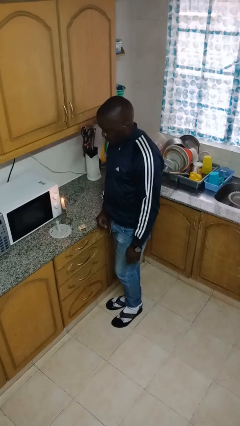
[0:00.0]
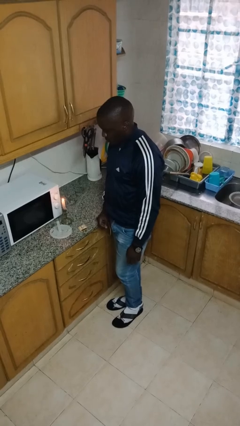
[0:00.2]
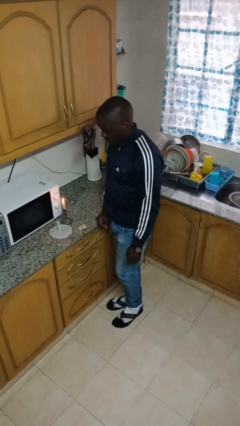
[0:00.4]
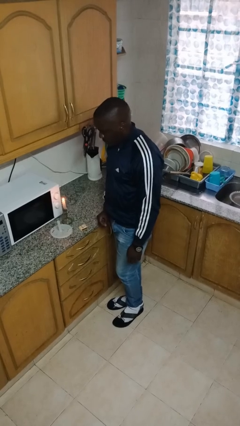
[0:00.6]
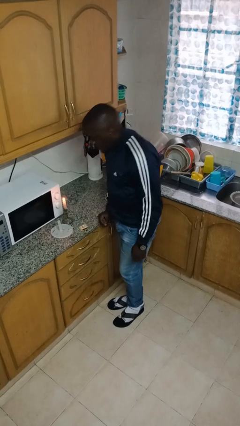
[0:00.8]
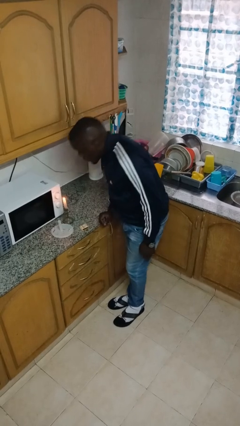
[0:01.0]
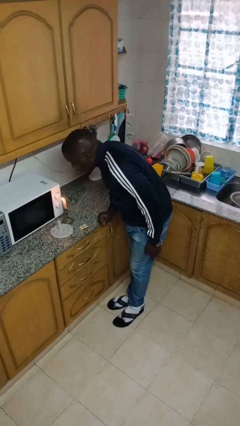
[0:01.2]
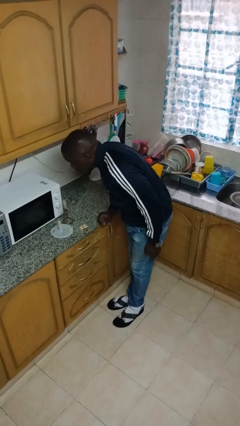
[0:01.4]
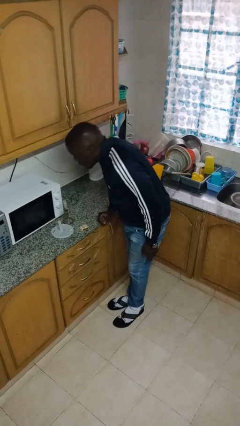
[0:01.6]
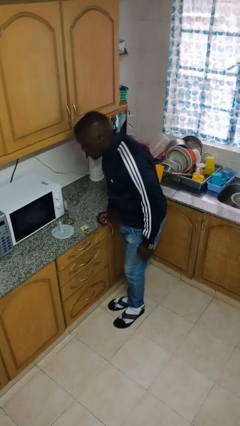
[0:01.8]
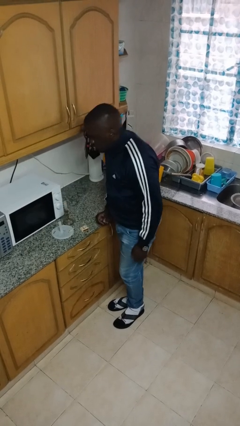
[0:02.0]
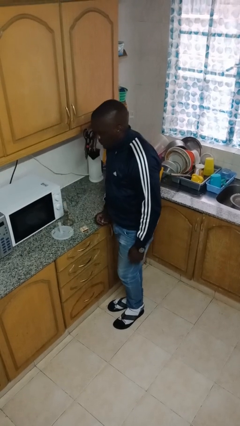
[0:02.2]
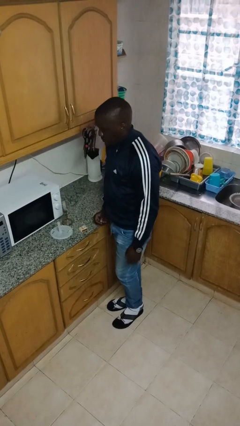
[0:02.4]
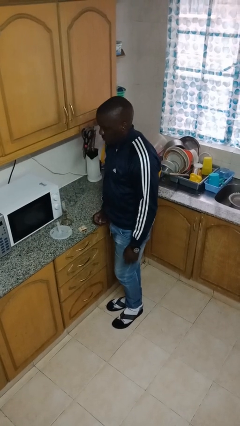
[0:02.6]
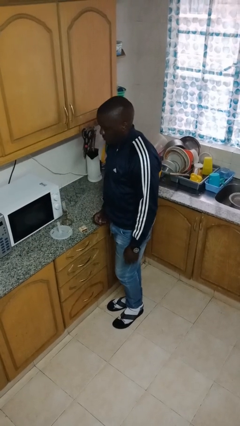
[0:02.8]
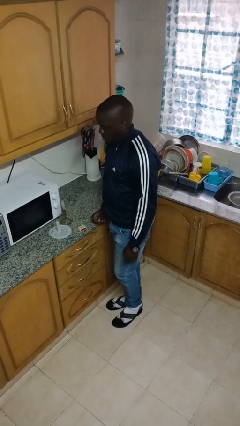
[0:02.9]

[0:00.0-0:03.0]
person extinguishes candle

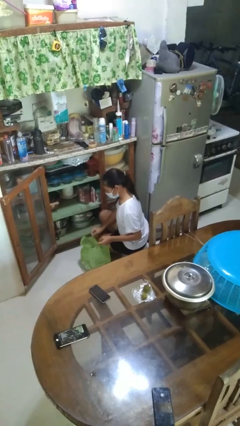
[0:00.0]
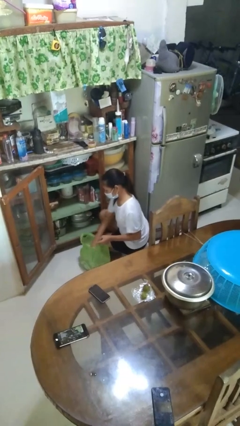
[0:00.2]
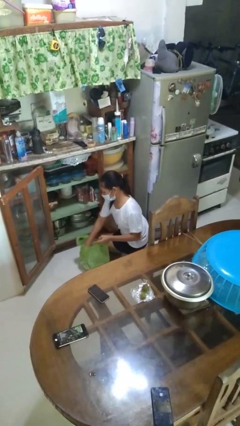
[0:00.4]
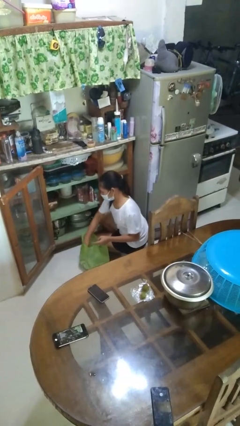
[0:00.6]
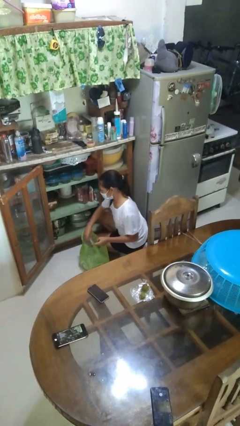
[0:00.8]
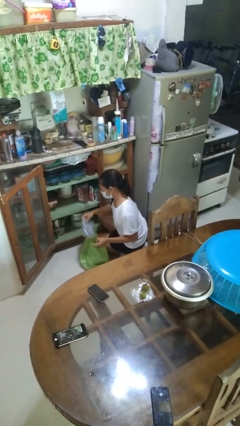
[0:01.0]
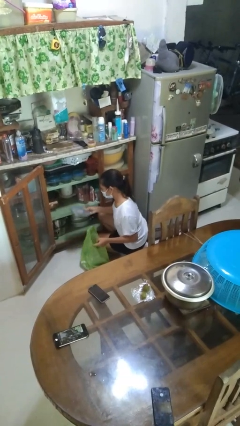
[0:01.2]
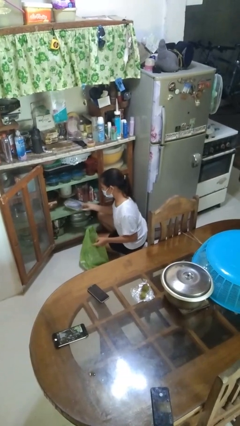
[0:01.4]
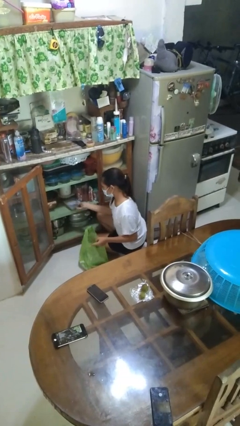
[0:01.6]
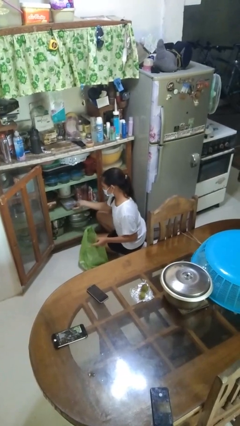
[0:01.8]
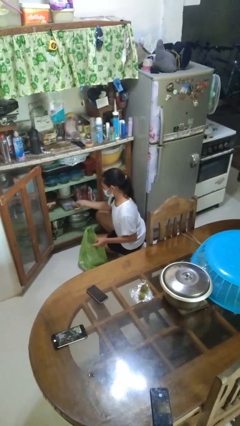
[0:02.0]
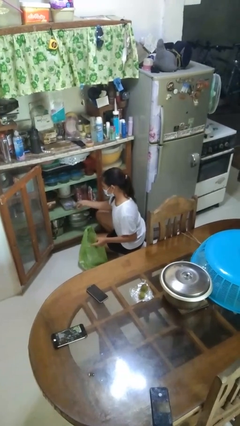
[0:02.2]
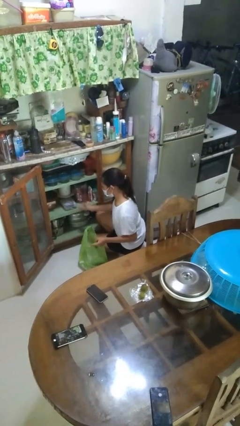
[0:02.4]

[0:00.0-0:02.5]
person loads groceries into cabinet

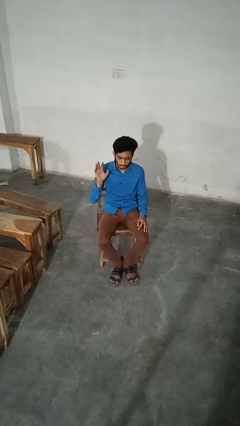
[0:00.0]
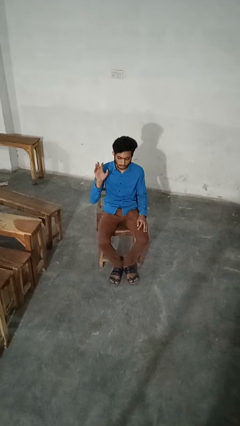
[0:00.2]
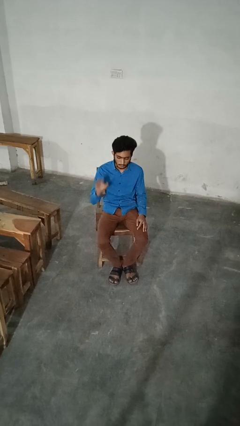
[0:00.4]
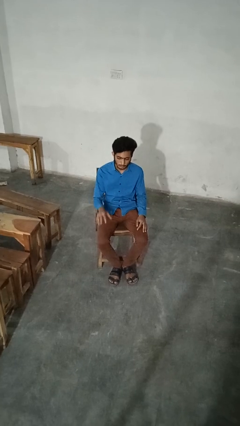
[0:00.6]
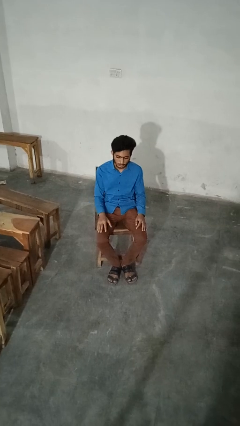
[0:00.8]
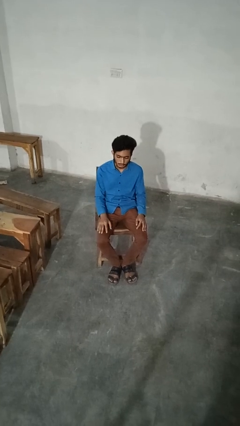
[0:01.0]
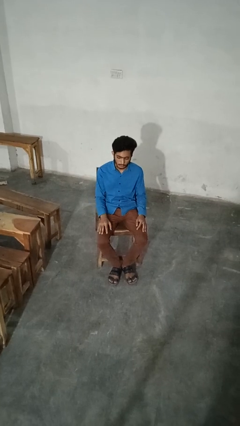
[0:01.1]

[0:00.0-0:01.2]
person gestures lower hand

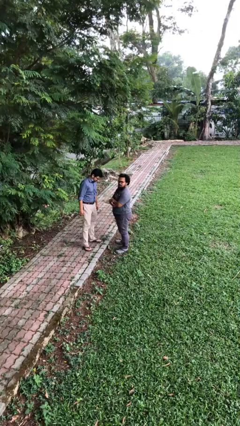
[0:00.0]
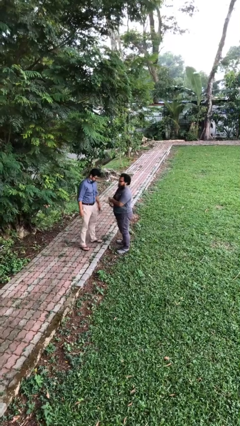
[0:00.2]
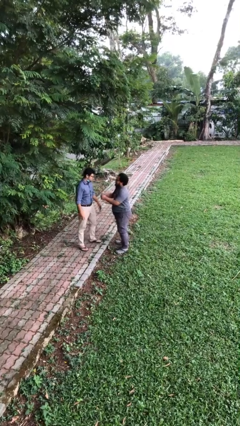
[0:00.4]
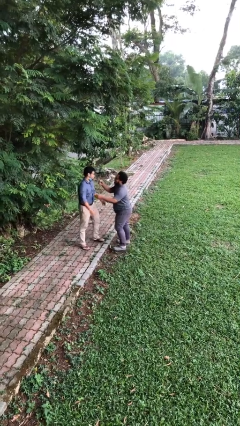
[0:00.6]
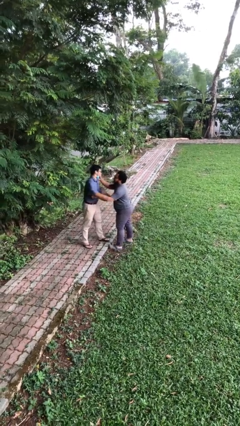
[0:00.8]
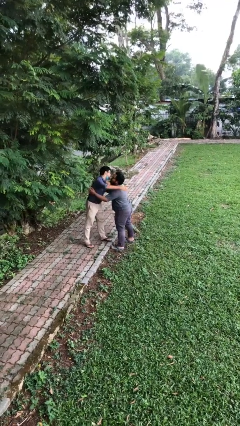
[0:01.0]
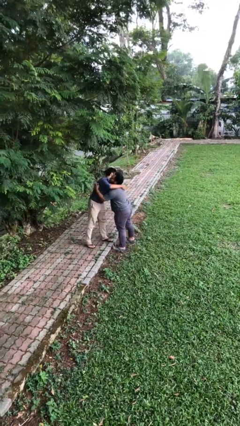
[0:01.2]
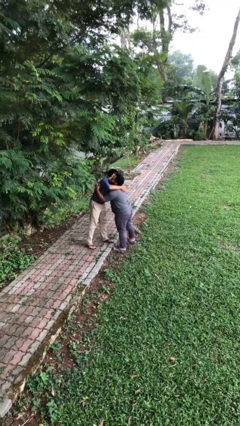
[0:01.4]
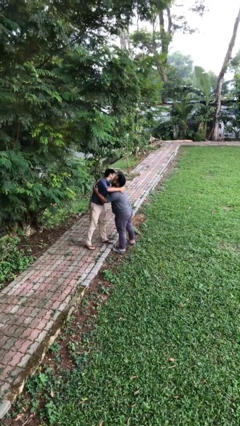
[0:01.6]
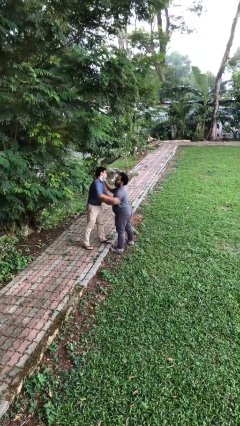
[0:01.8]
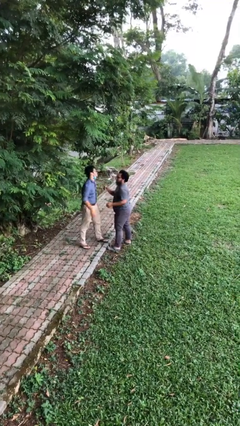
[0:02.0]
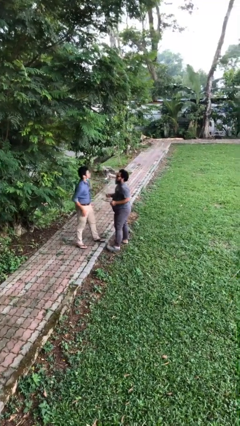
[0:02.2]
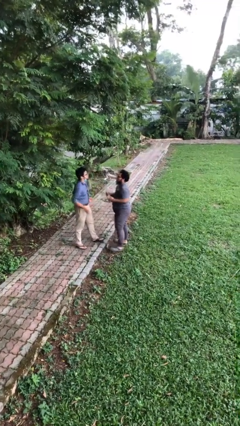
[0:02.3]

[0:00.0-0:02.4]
person embraces person

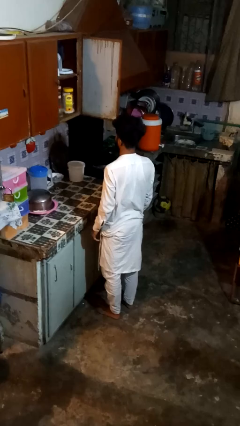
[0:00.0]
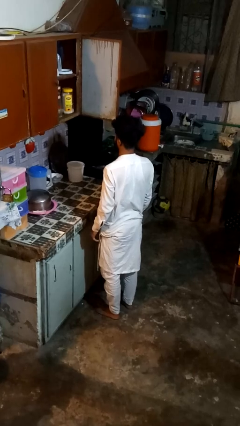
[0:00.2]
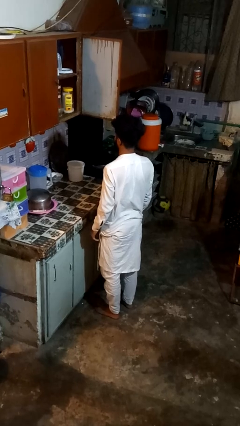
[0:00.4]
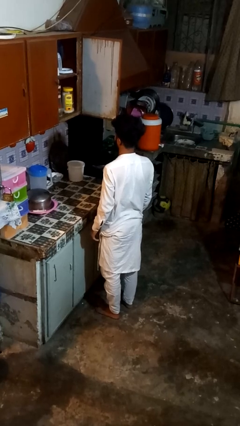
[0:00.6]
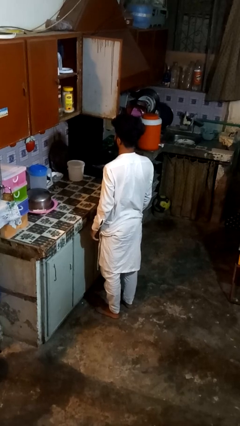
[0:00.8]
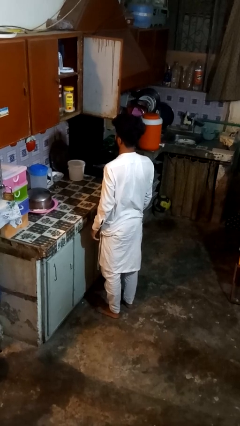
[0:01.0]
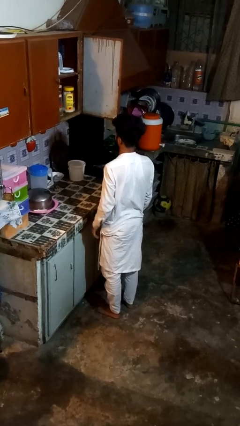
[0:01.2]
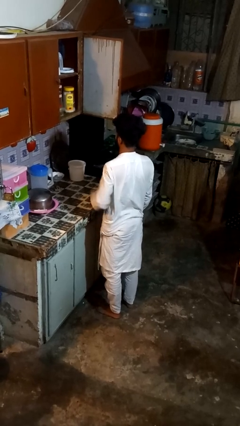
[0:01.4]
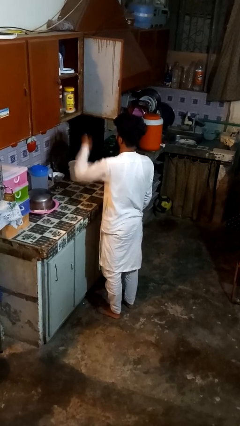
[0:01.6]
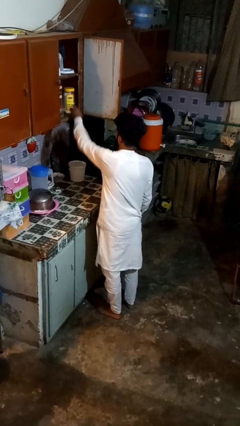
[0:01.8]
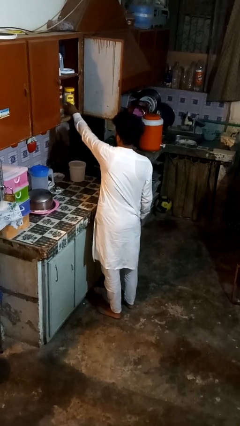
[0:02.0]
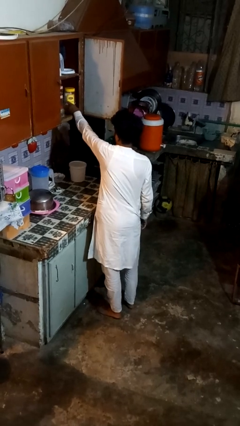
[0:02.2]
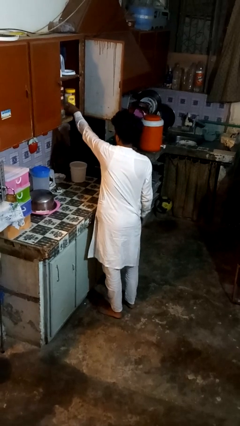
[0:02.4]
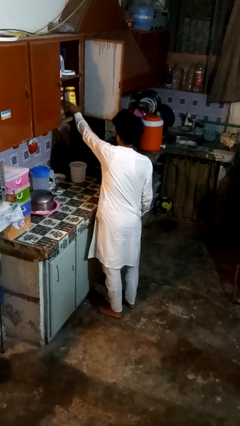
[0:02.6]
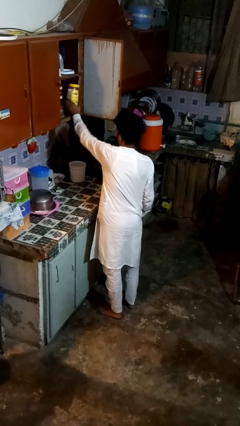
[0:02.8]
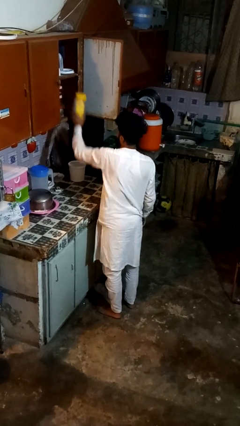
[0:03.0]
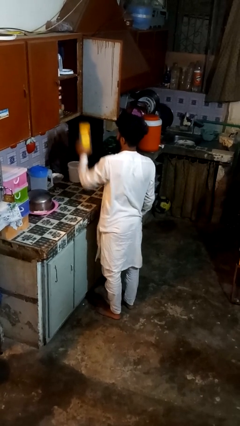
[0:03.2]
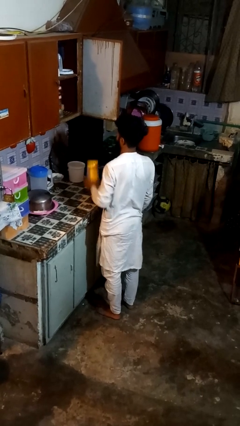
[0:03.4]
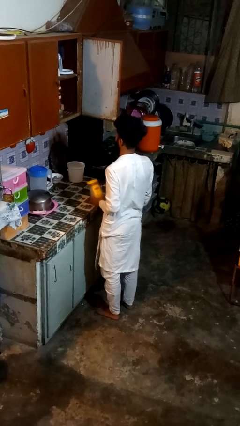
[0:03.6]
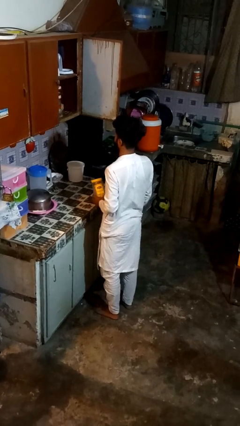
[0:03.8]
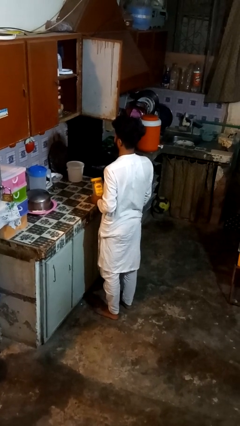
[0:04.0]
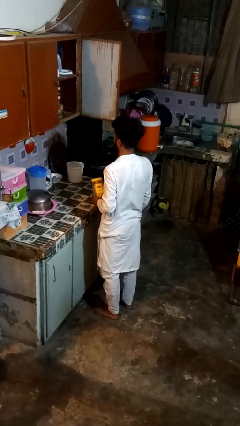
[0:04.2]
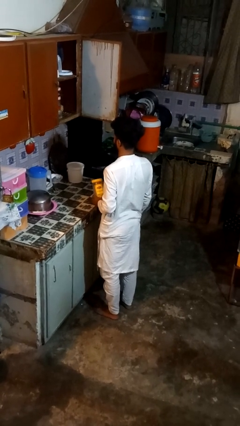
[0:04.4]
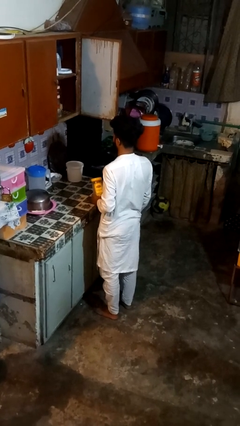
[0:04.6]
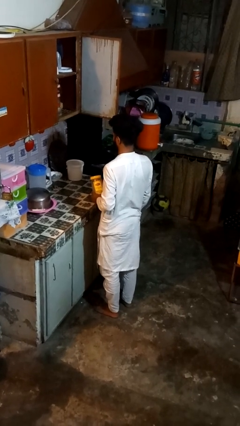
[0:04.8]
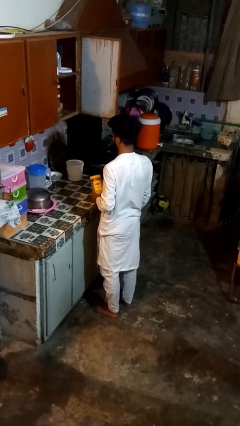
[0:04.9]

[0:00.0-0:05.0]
person puts object in cabinet

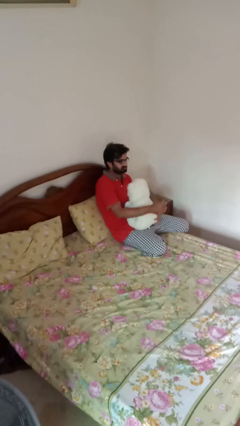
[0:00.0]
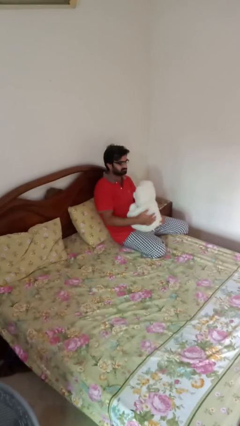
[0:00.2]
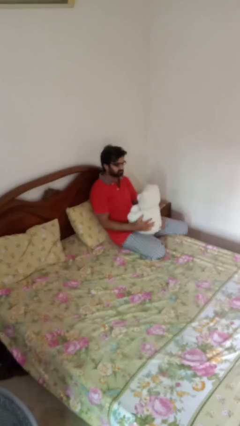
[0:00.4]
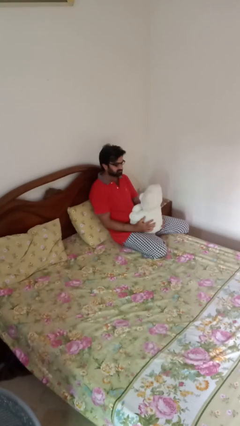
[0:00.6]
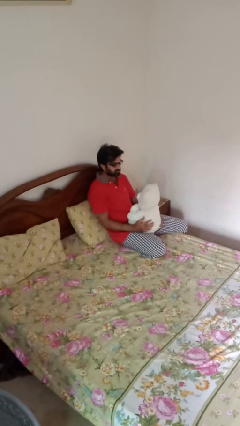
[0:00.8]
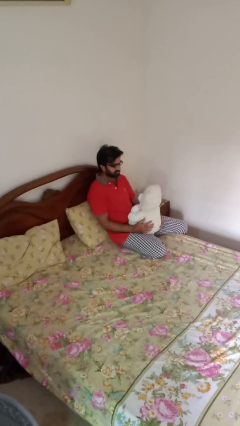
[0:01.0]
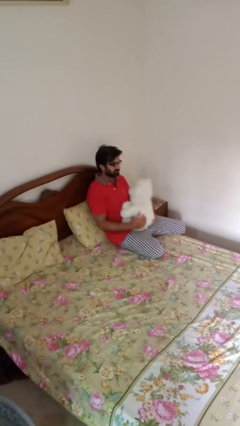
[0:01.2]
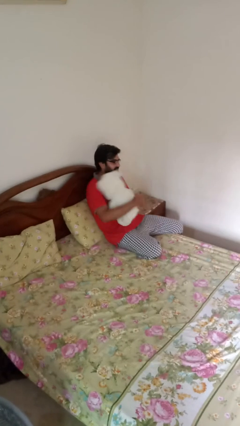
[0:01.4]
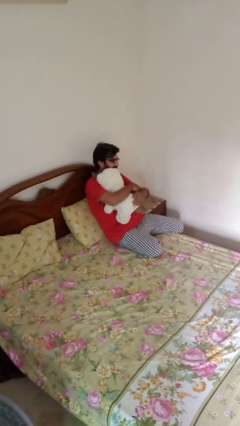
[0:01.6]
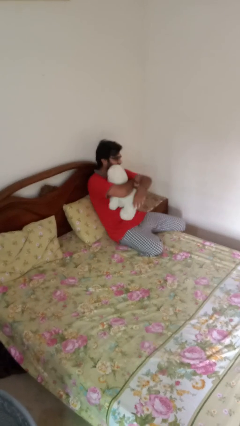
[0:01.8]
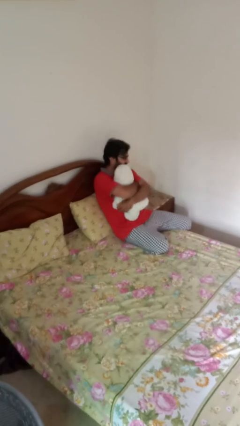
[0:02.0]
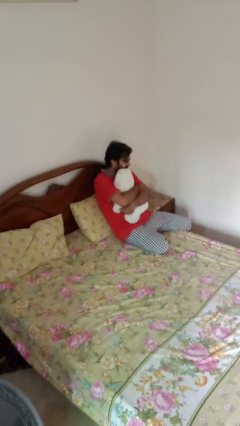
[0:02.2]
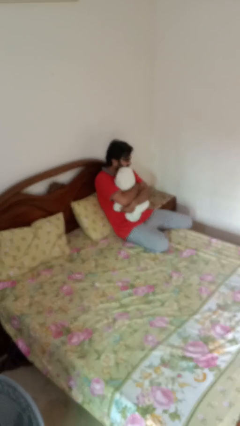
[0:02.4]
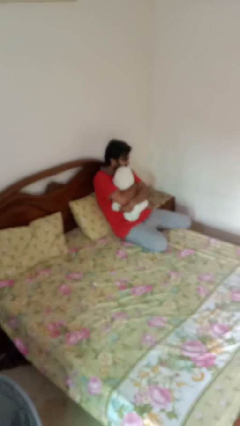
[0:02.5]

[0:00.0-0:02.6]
person hugs stuffed animal

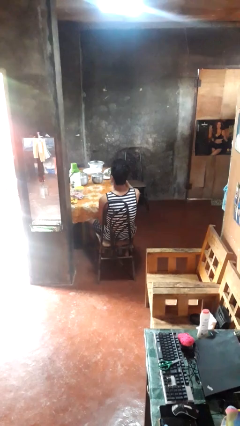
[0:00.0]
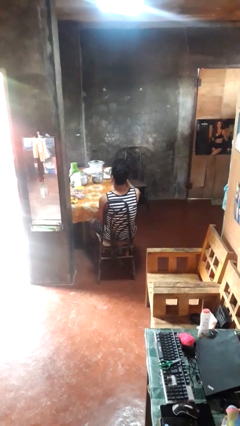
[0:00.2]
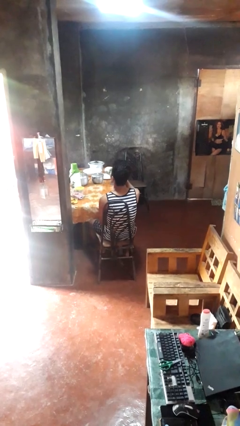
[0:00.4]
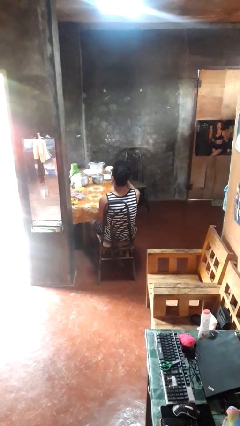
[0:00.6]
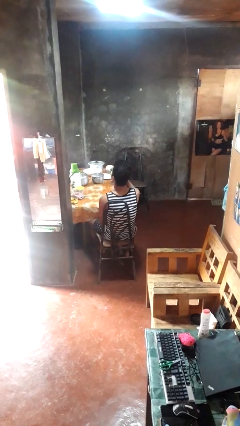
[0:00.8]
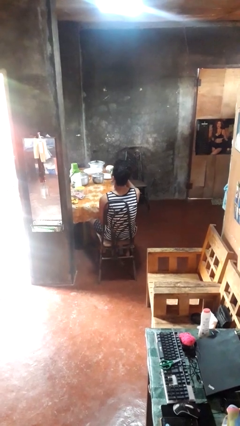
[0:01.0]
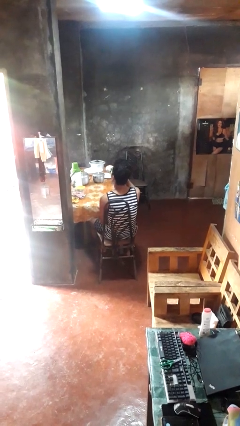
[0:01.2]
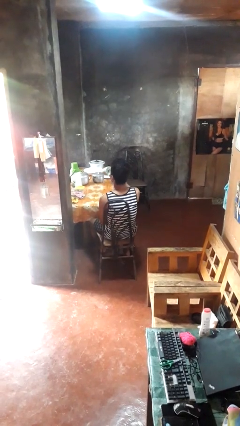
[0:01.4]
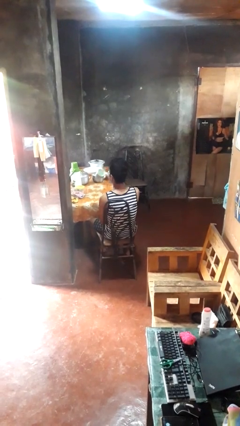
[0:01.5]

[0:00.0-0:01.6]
person drinks from mug
